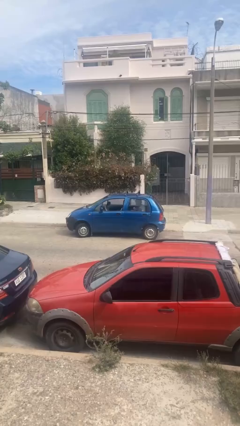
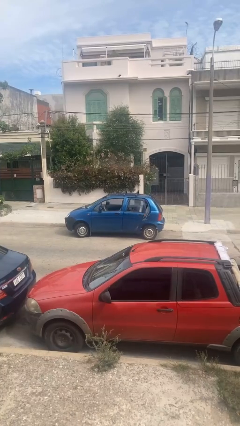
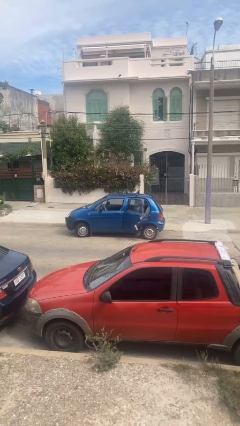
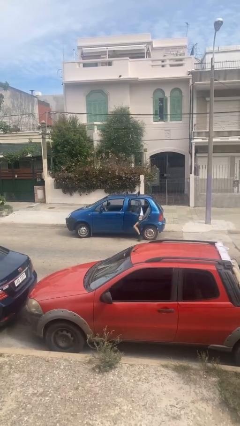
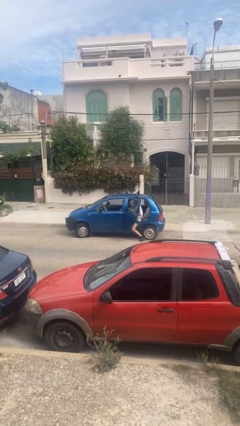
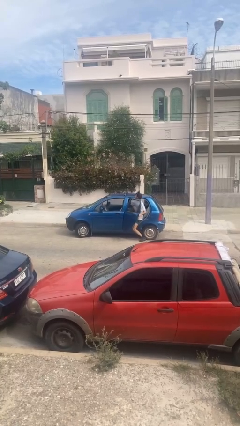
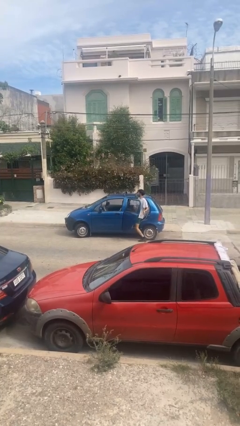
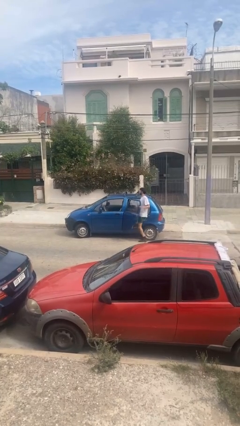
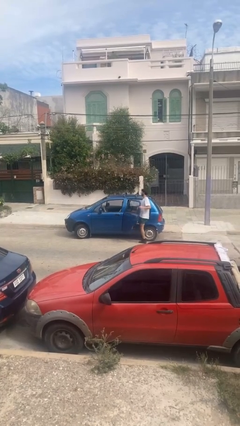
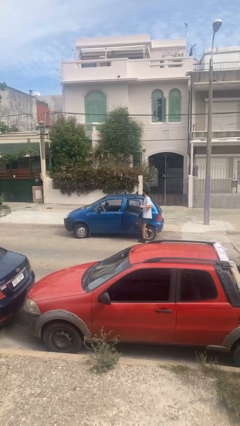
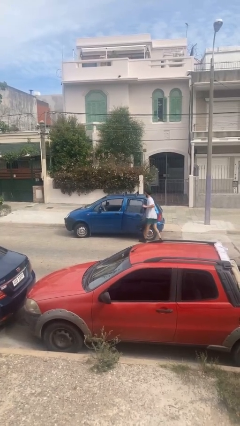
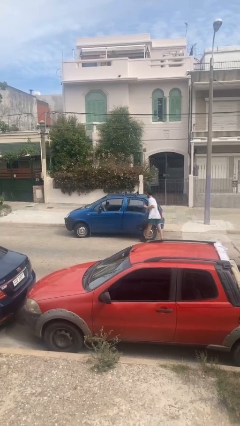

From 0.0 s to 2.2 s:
car drops off person

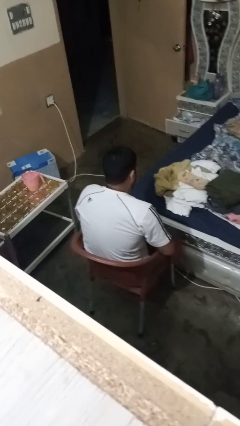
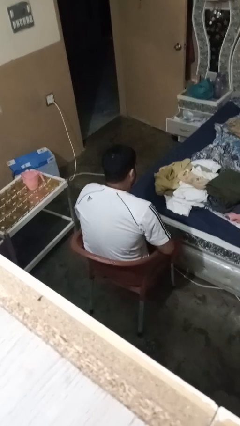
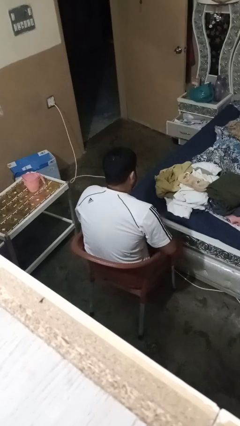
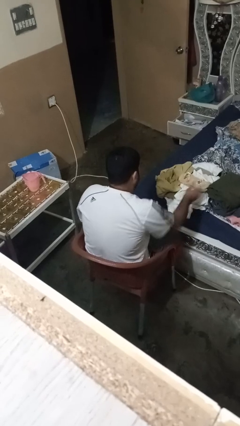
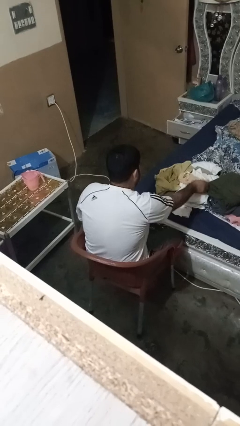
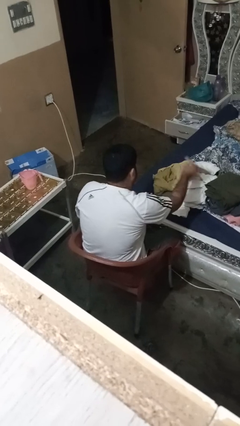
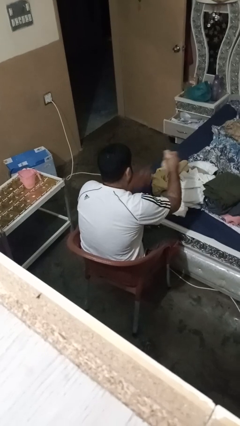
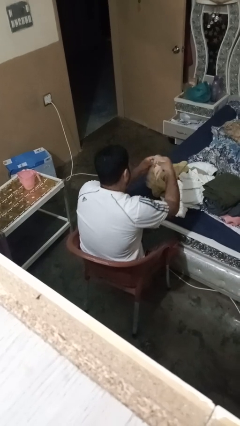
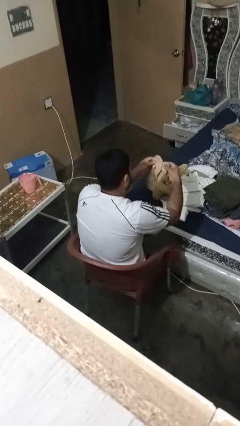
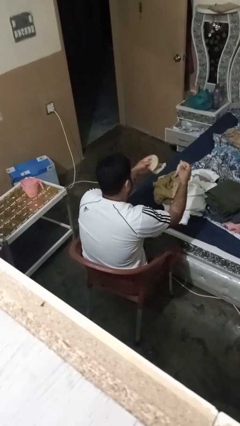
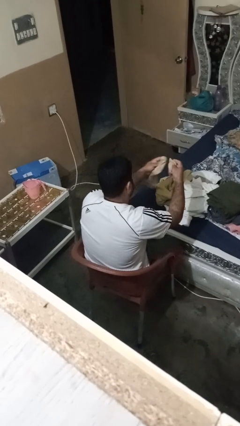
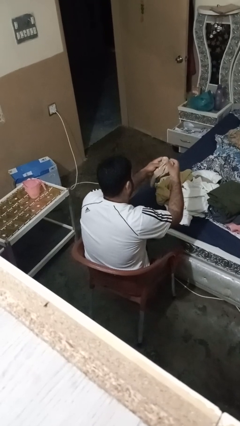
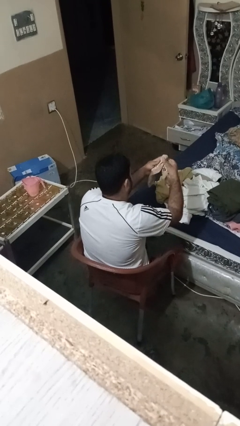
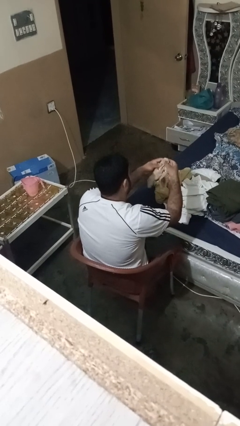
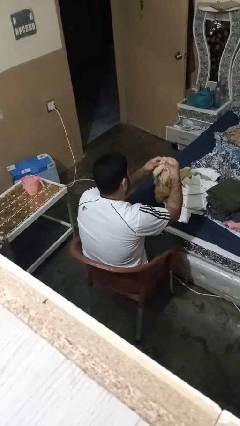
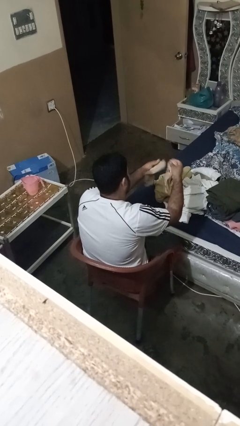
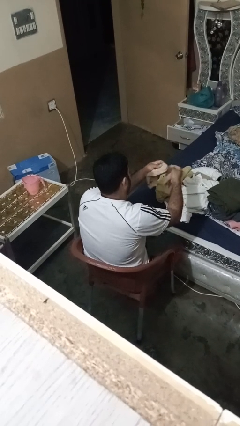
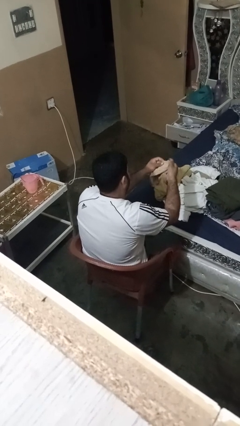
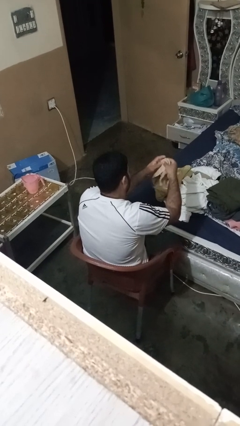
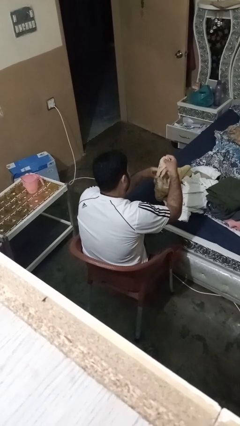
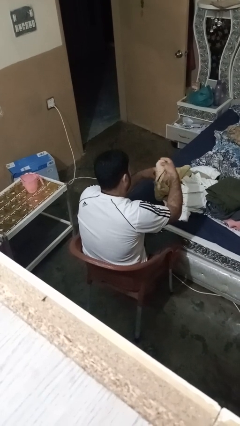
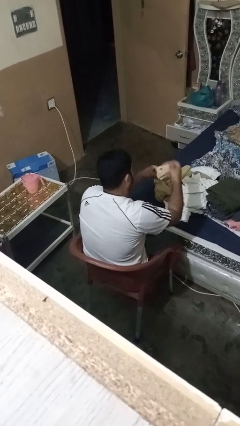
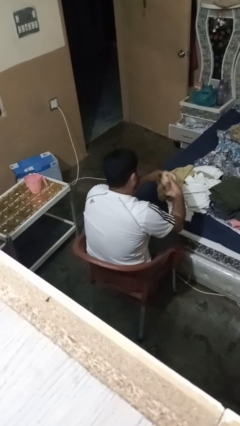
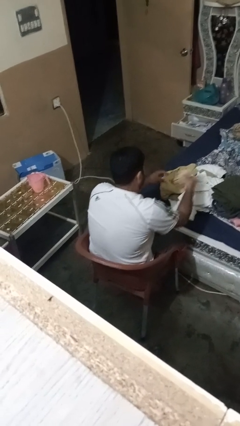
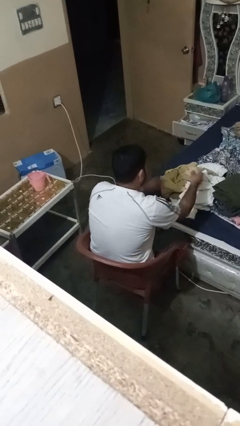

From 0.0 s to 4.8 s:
person folds socks

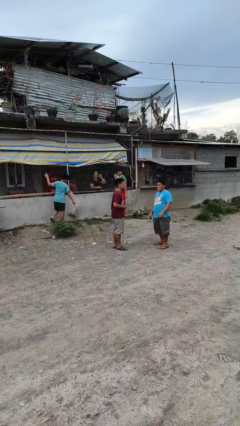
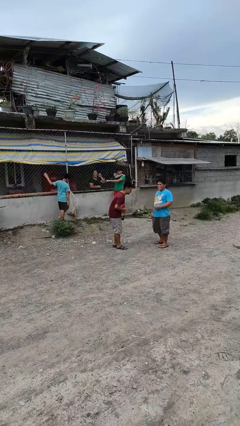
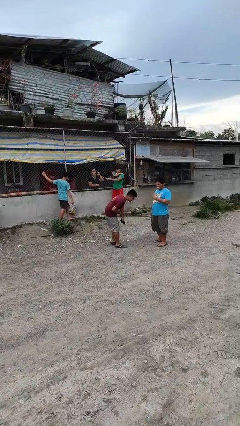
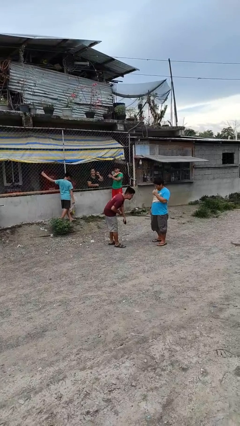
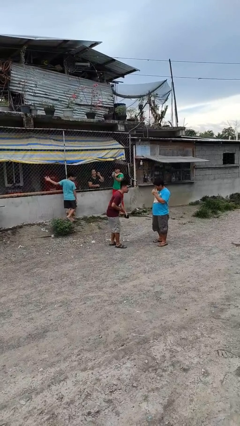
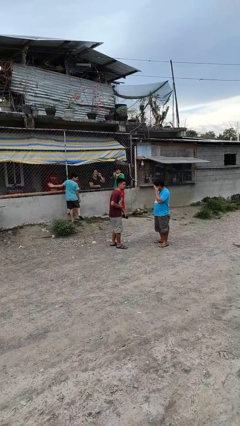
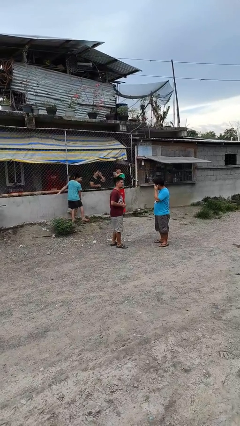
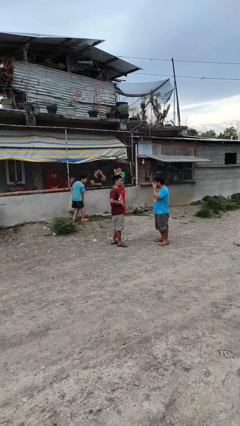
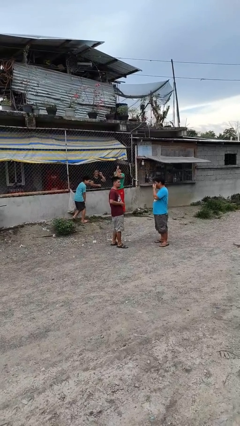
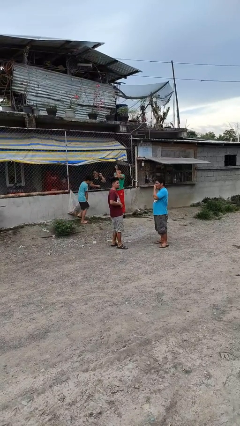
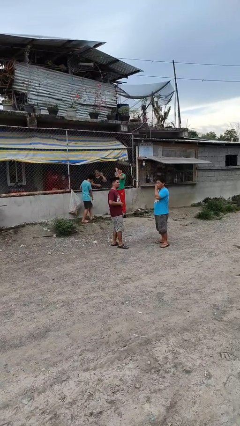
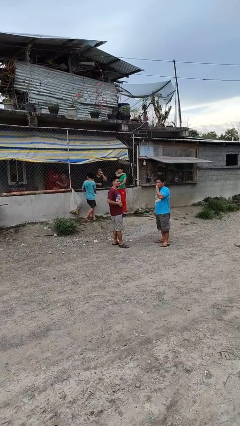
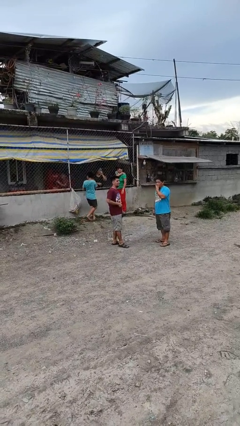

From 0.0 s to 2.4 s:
person laughs with person

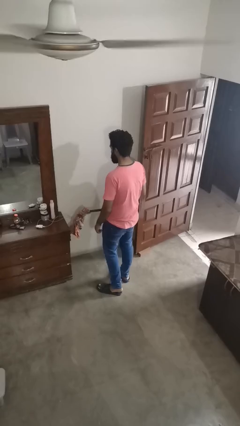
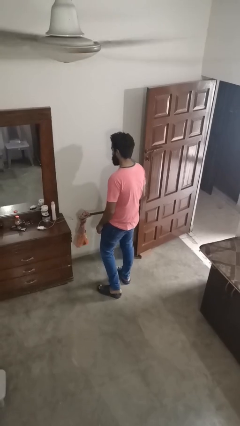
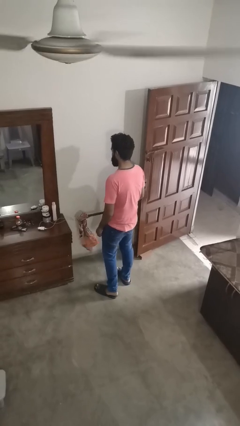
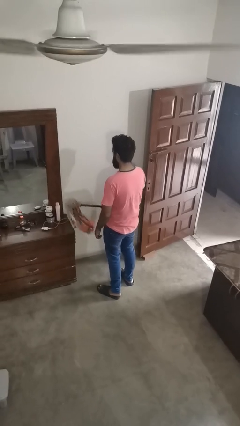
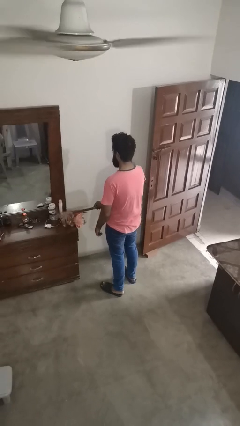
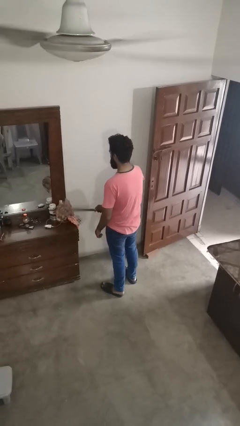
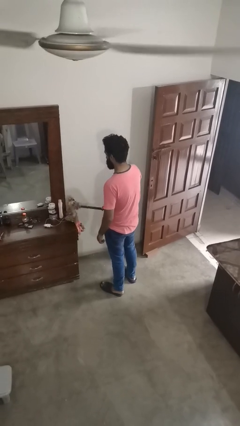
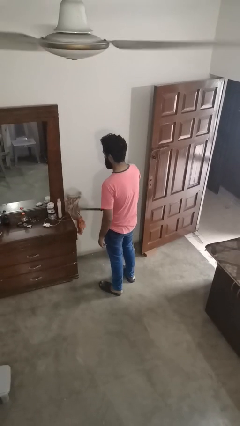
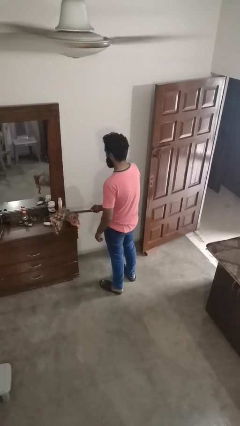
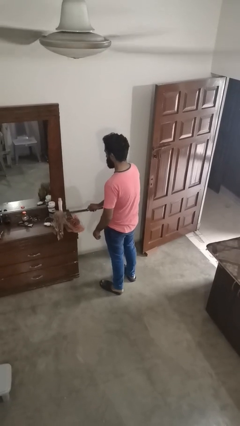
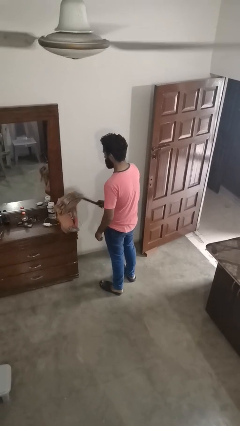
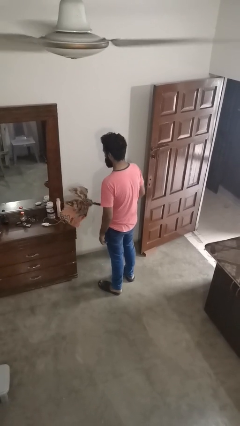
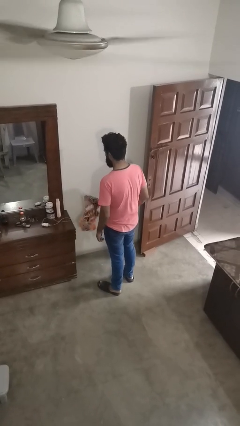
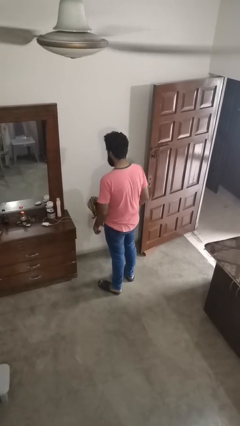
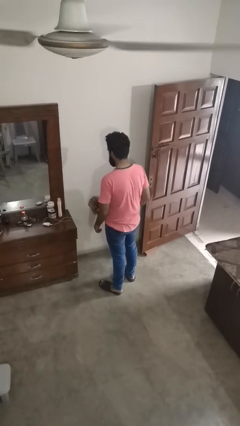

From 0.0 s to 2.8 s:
person dusts furniture

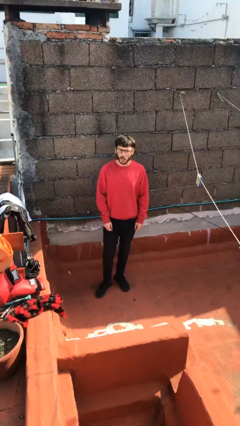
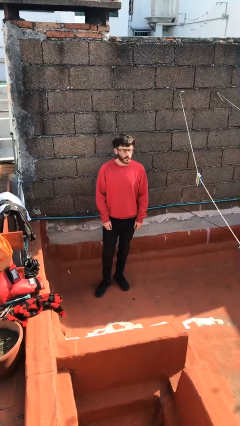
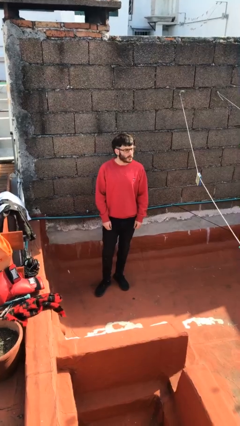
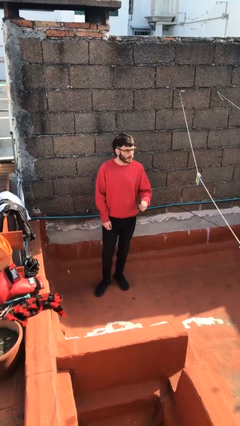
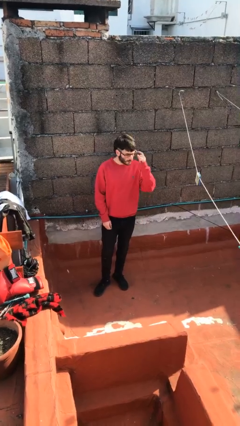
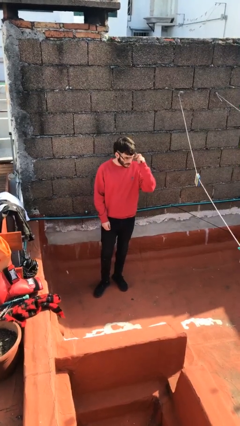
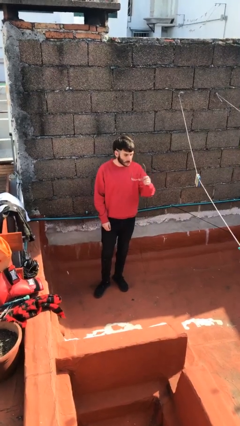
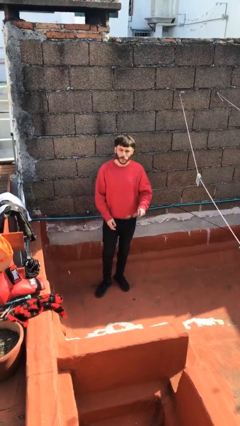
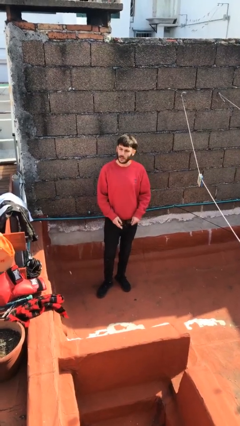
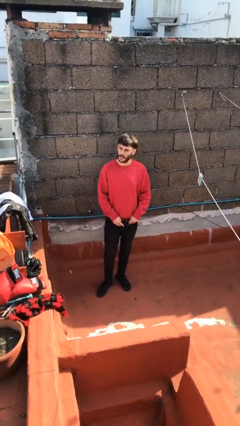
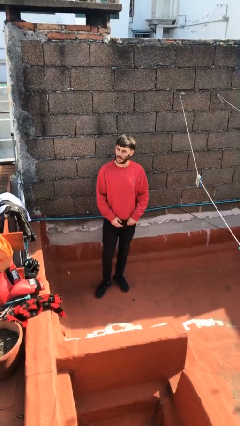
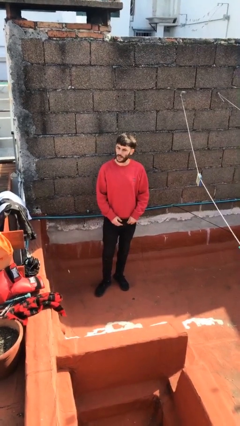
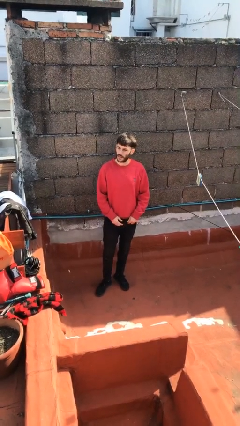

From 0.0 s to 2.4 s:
person takes off glasses

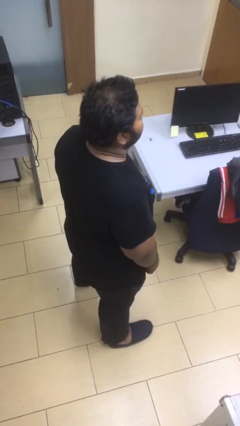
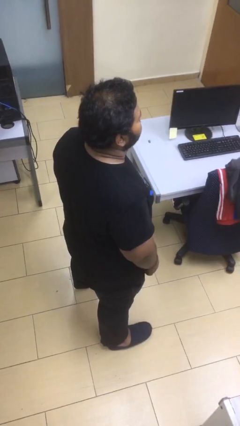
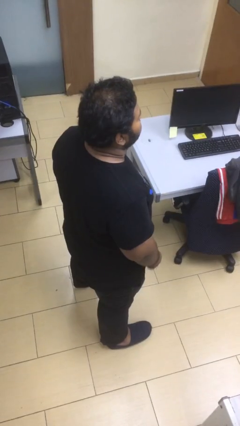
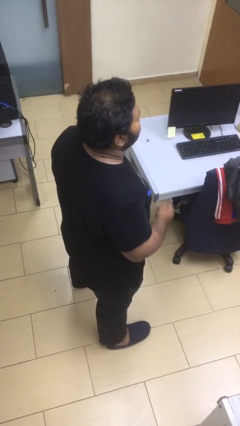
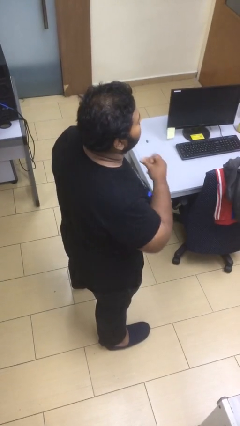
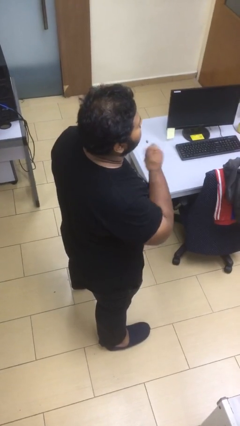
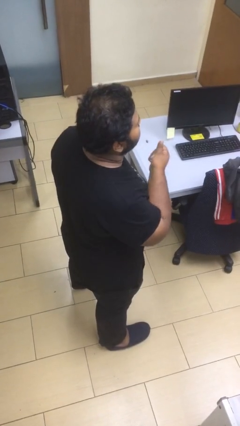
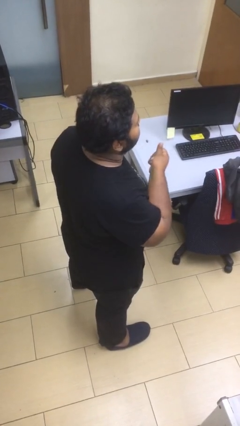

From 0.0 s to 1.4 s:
person snaps fingers

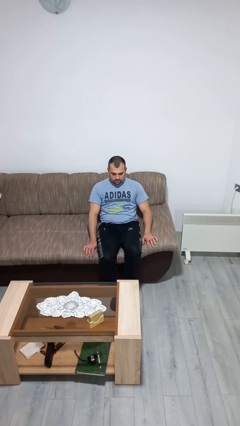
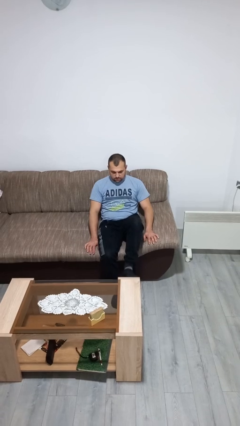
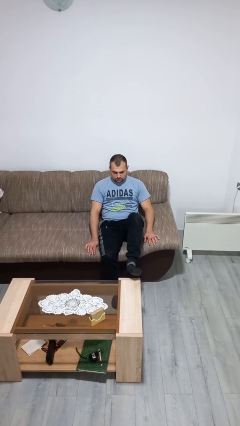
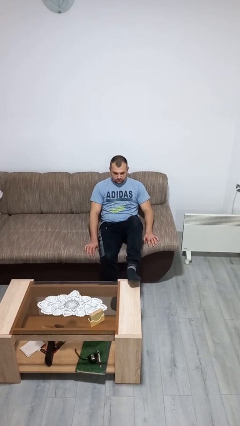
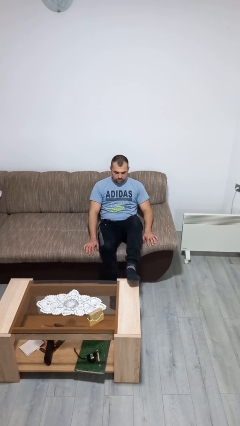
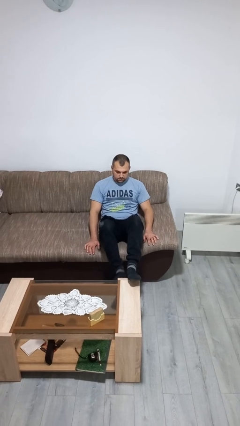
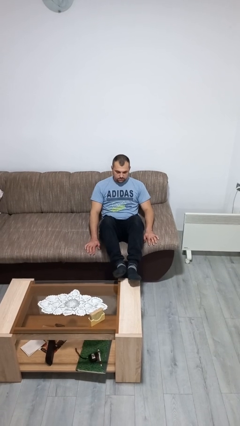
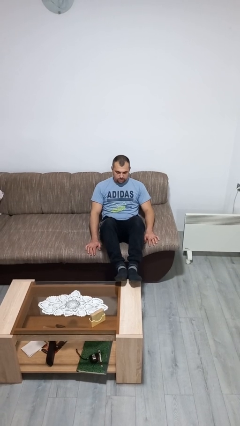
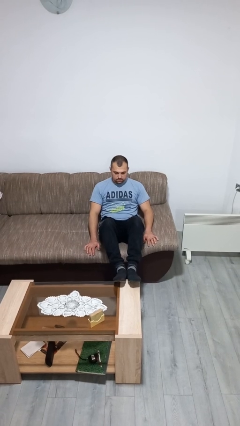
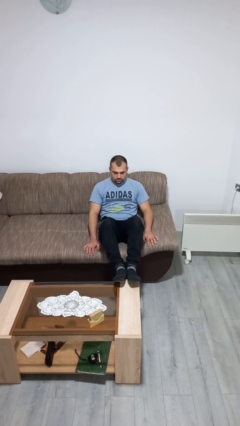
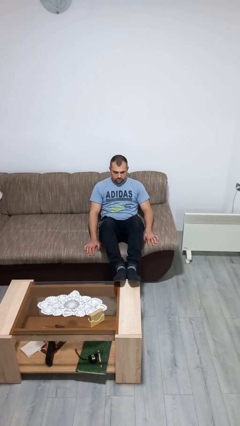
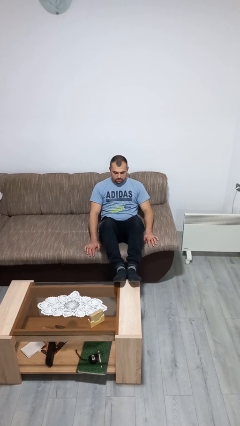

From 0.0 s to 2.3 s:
person puts feet up
